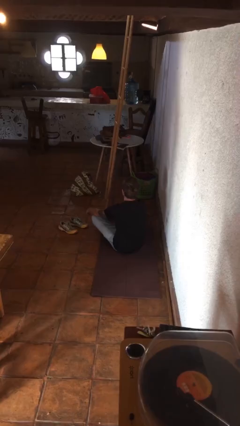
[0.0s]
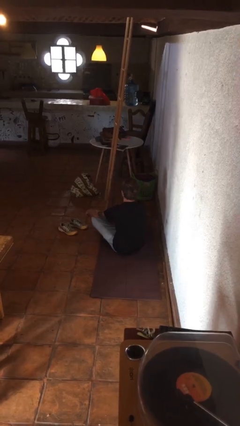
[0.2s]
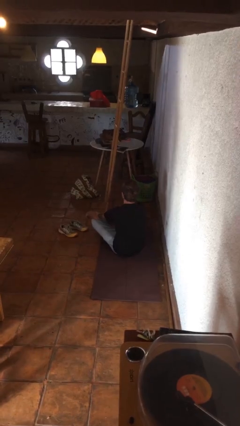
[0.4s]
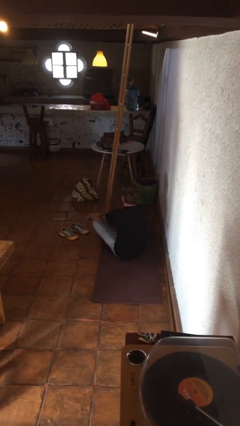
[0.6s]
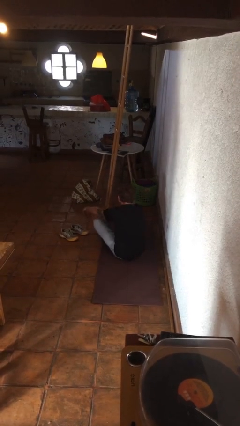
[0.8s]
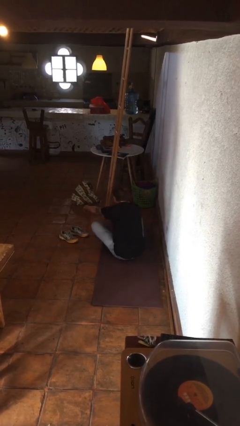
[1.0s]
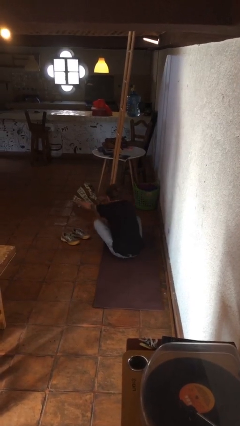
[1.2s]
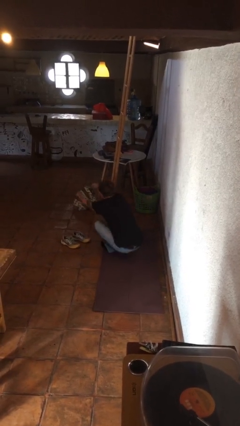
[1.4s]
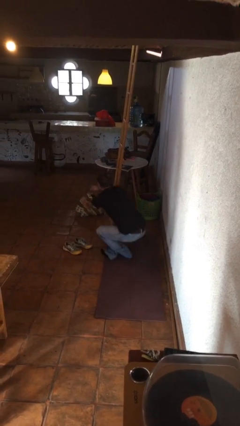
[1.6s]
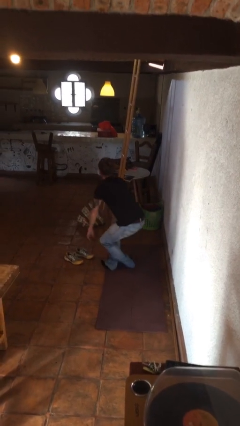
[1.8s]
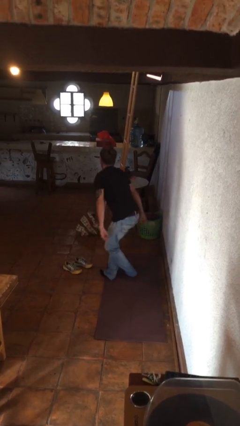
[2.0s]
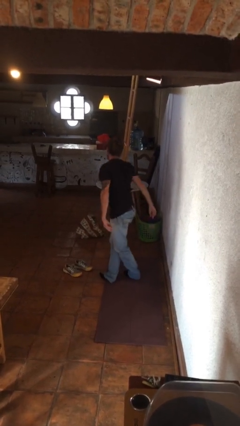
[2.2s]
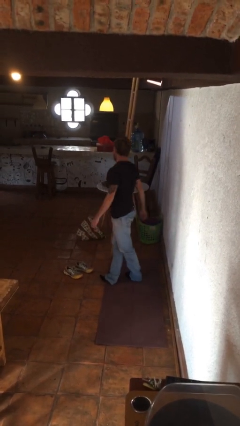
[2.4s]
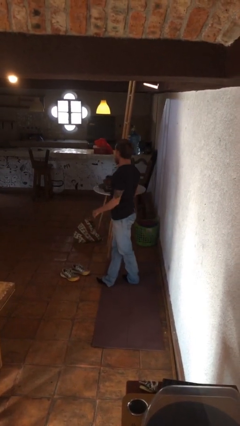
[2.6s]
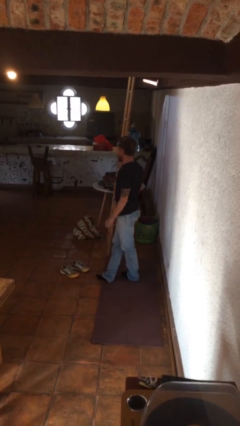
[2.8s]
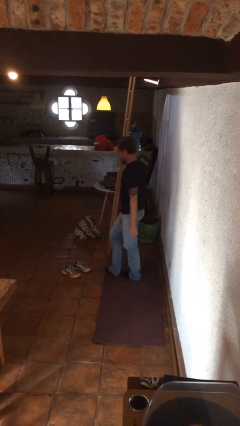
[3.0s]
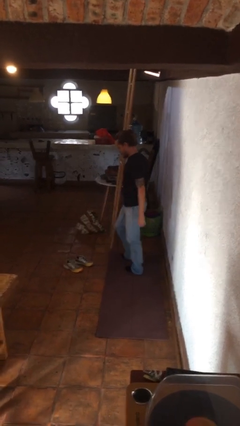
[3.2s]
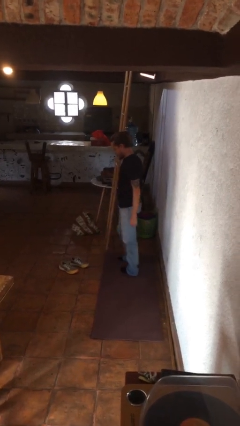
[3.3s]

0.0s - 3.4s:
person stands up from floor

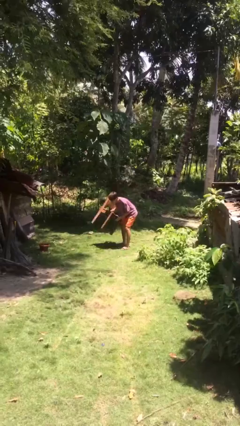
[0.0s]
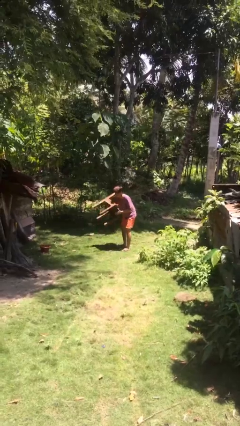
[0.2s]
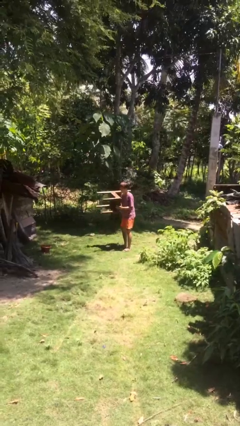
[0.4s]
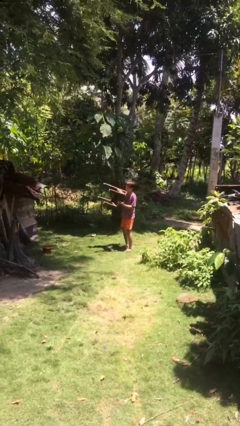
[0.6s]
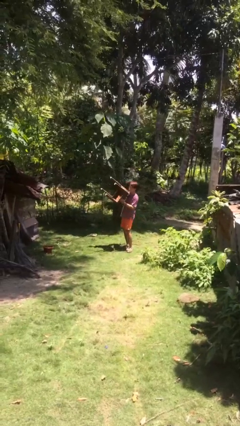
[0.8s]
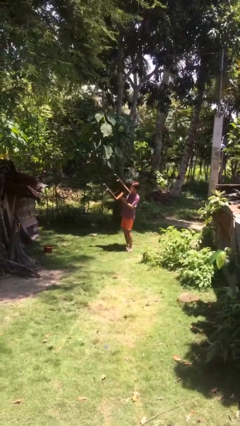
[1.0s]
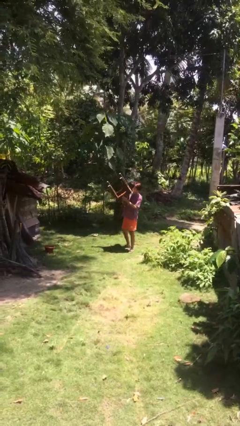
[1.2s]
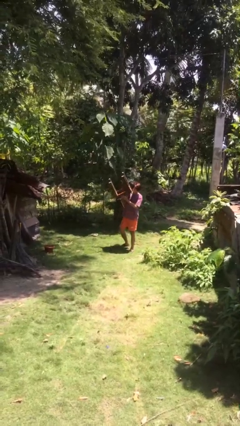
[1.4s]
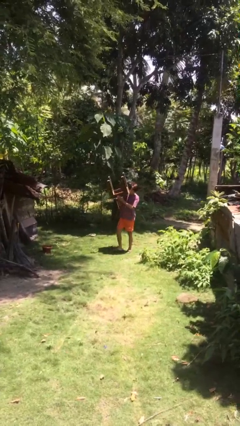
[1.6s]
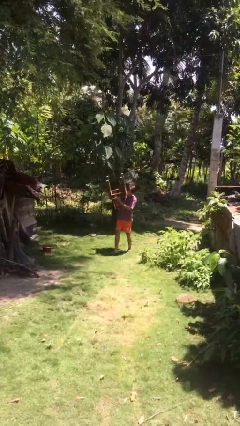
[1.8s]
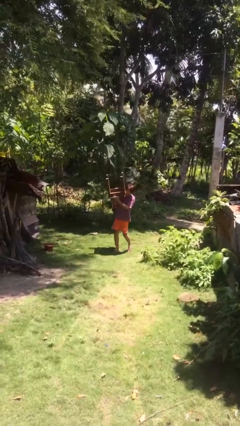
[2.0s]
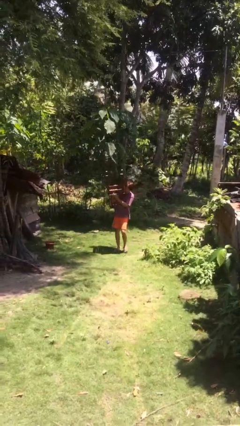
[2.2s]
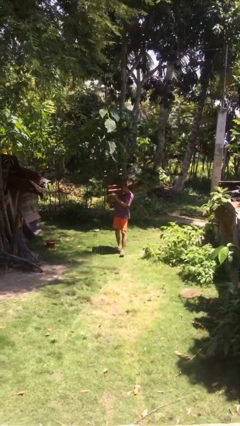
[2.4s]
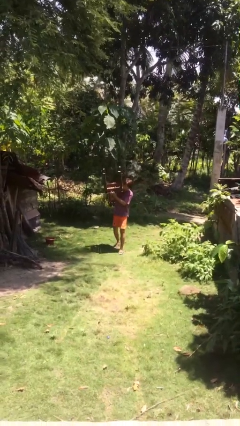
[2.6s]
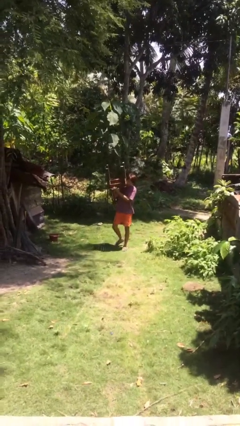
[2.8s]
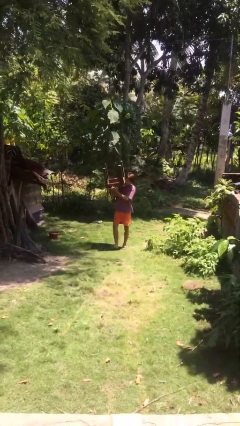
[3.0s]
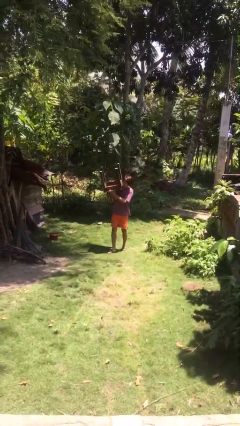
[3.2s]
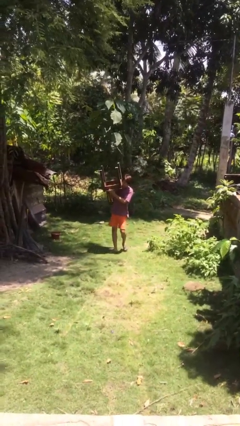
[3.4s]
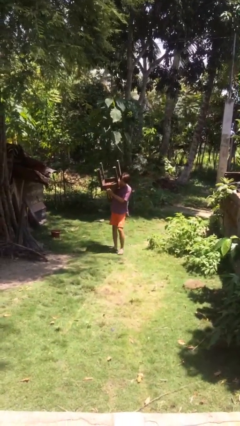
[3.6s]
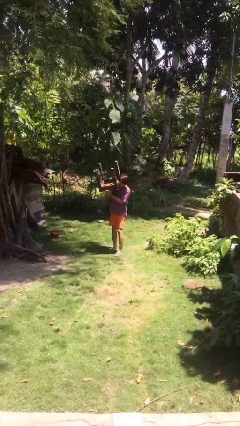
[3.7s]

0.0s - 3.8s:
person carries heavy object

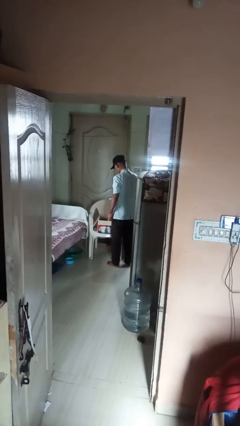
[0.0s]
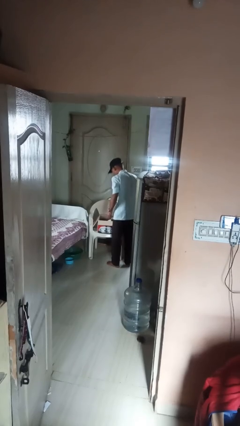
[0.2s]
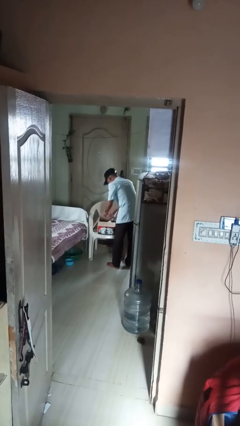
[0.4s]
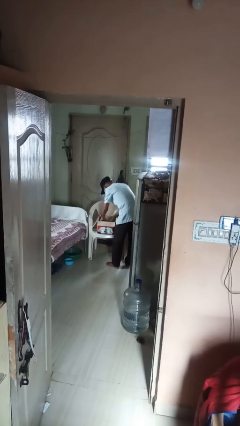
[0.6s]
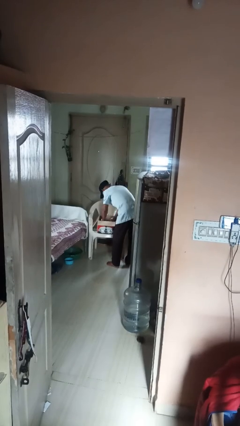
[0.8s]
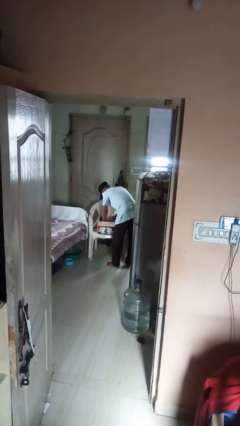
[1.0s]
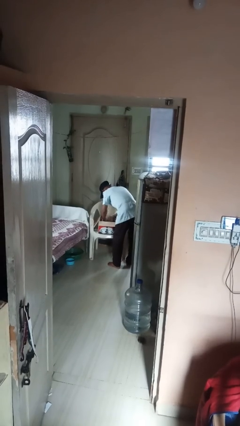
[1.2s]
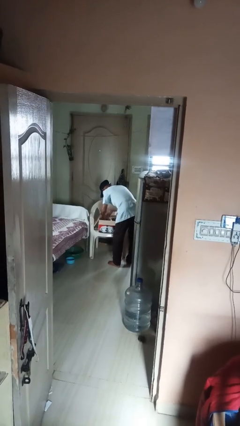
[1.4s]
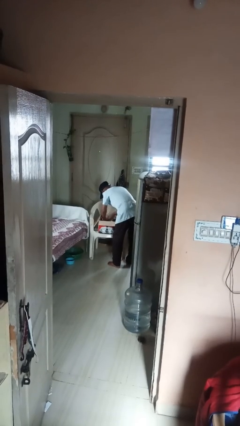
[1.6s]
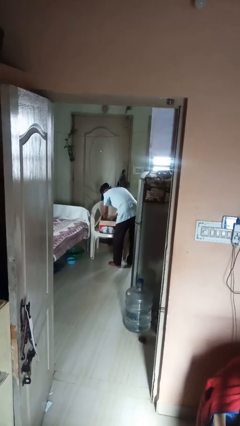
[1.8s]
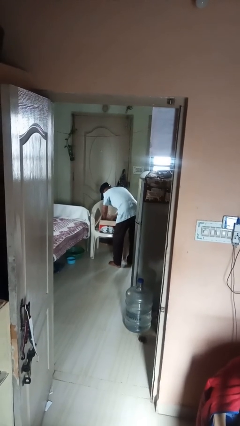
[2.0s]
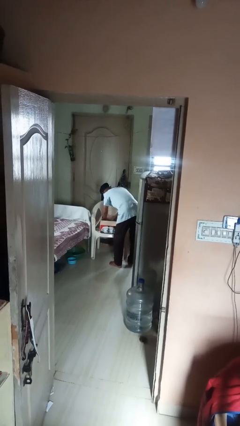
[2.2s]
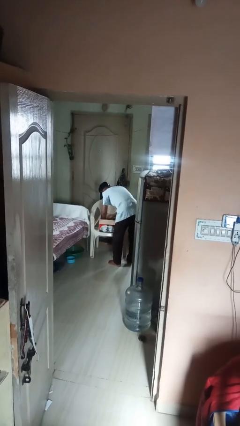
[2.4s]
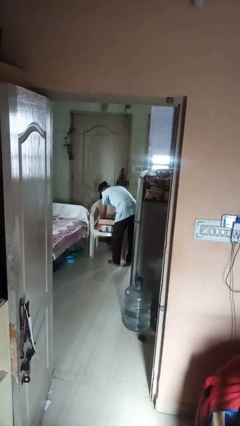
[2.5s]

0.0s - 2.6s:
person searches in box

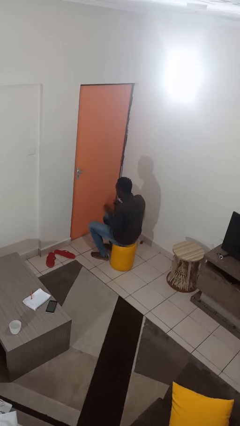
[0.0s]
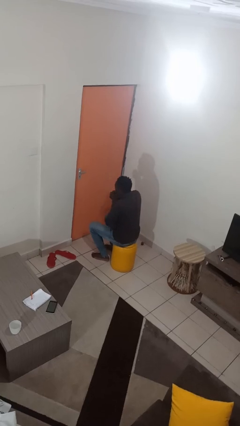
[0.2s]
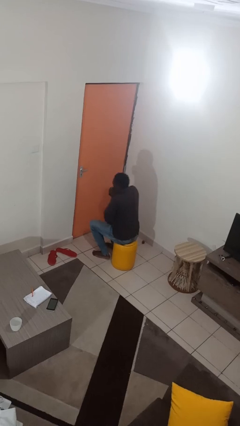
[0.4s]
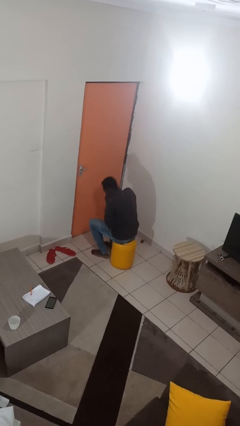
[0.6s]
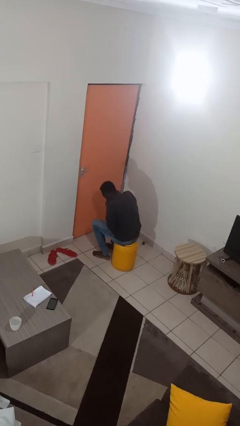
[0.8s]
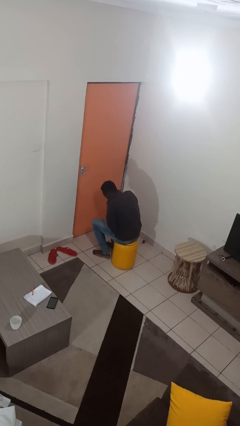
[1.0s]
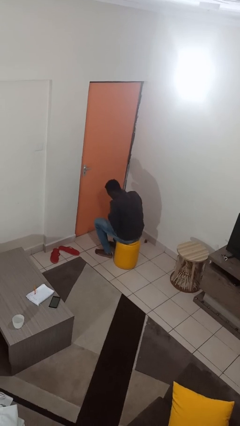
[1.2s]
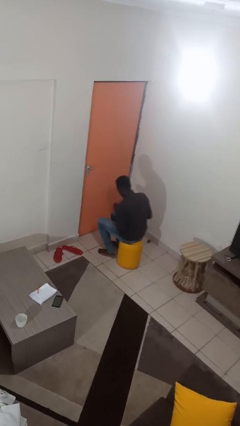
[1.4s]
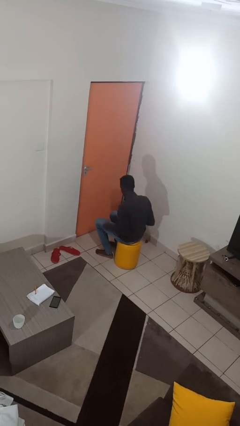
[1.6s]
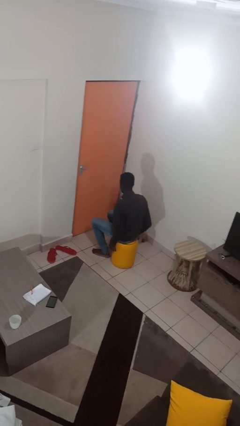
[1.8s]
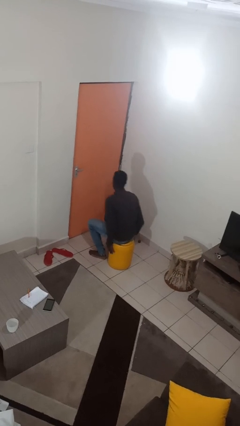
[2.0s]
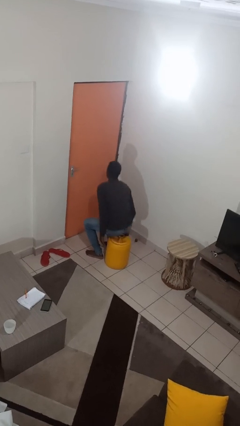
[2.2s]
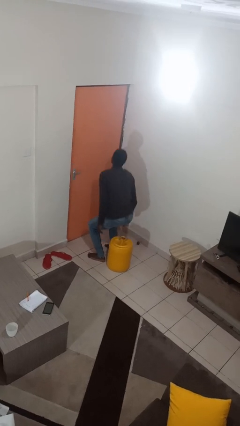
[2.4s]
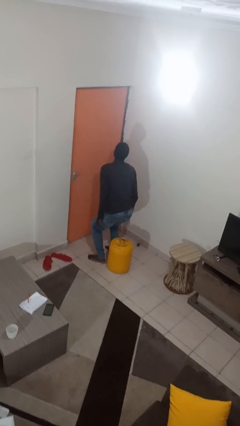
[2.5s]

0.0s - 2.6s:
person sneezes into hand

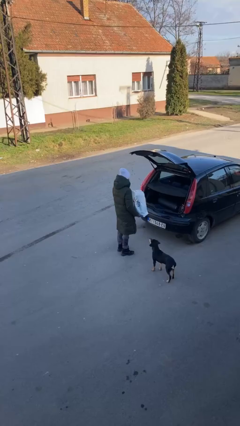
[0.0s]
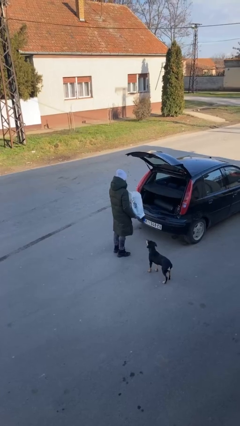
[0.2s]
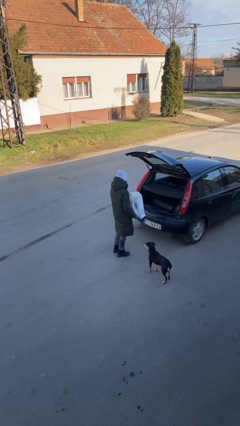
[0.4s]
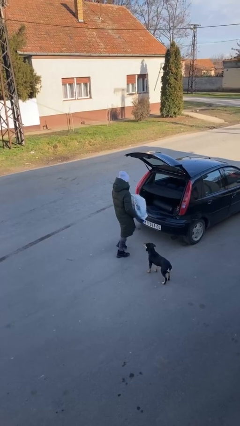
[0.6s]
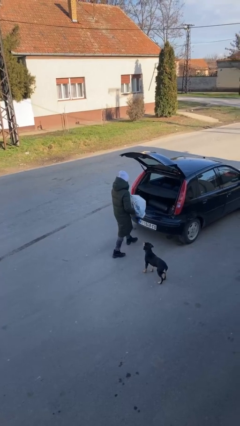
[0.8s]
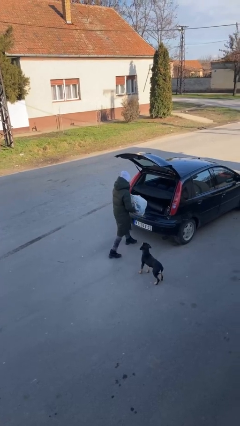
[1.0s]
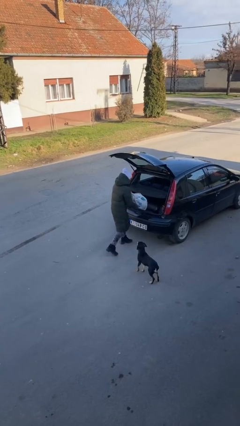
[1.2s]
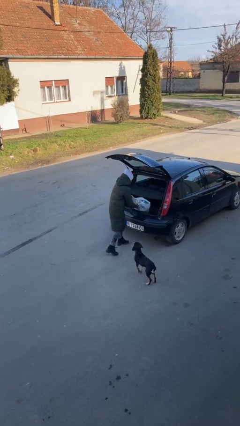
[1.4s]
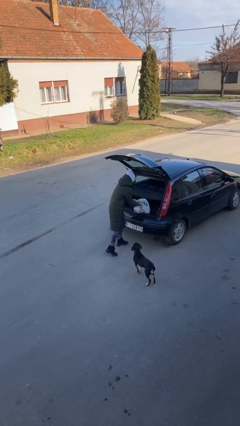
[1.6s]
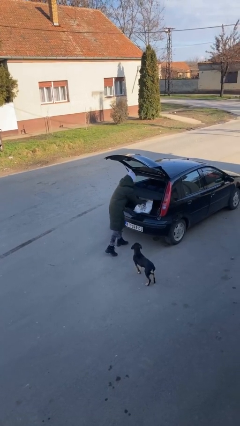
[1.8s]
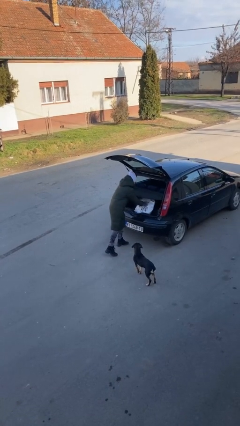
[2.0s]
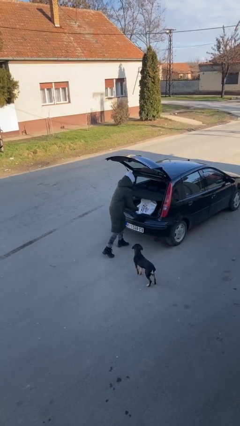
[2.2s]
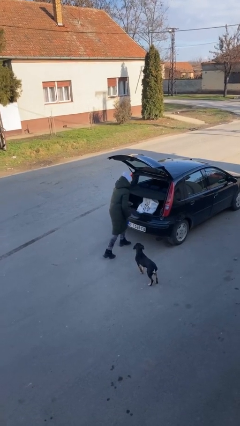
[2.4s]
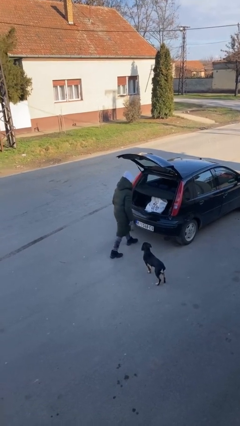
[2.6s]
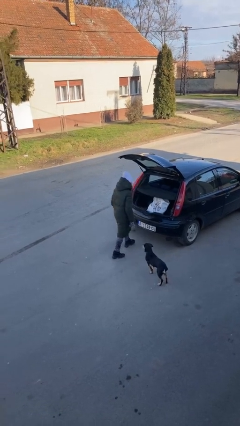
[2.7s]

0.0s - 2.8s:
person loads car

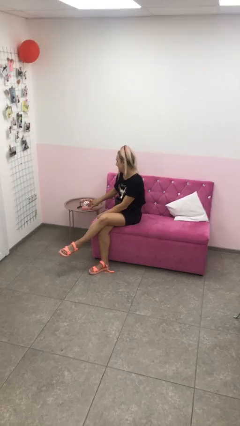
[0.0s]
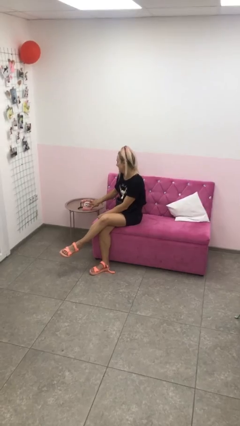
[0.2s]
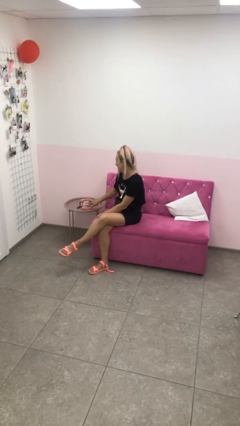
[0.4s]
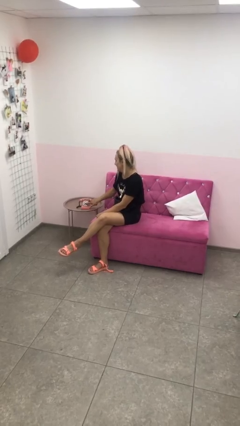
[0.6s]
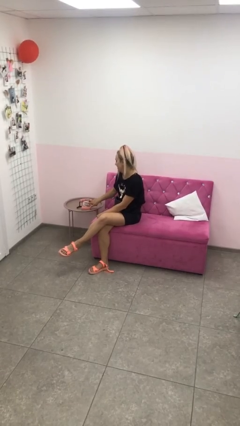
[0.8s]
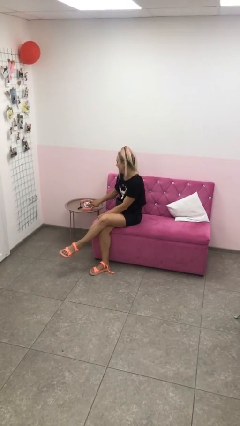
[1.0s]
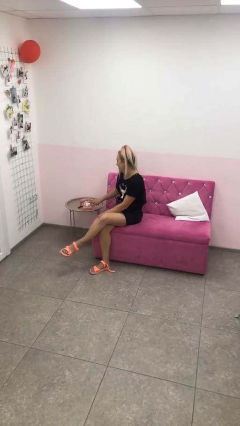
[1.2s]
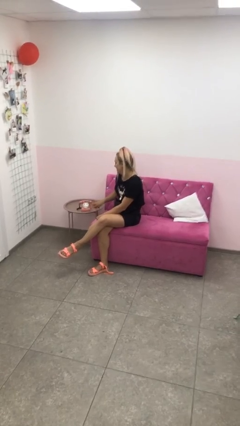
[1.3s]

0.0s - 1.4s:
person taps object with finger

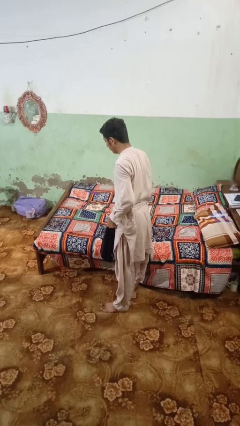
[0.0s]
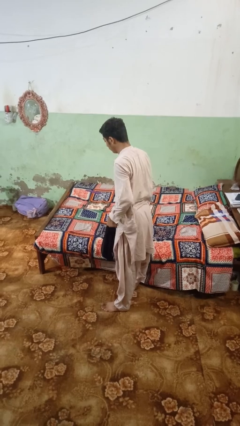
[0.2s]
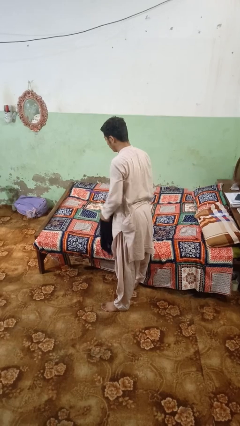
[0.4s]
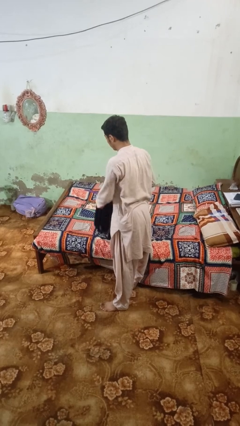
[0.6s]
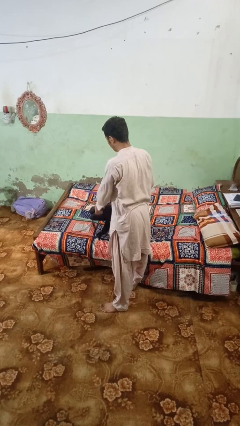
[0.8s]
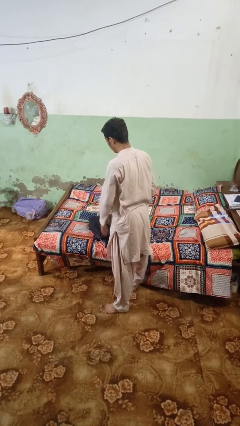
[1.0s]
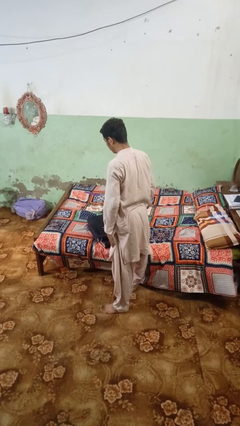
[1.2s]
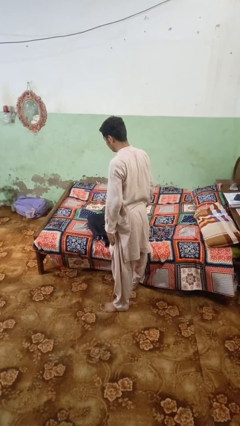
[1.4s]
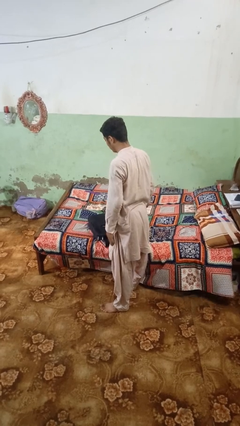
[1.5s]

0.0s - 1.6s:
person puts down object on bed
